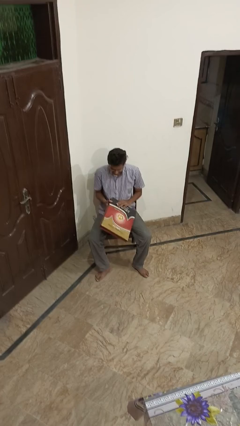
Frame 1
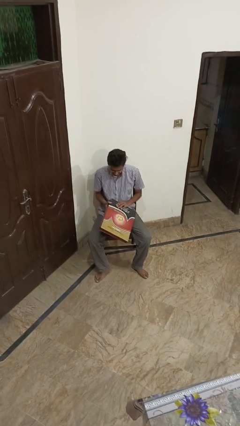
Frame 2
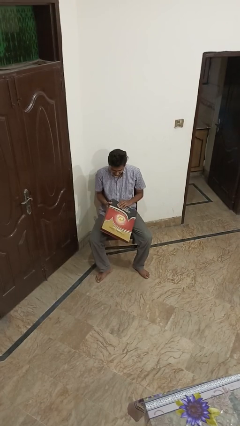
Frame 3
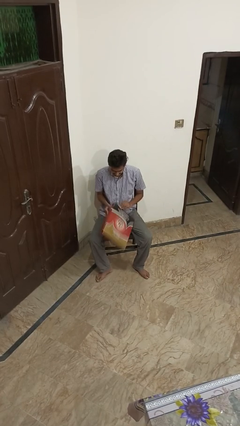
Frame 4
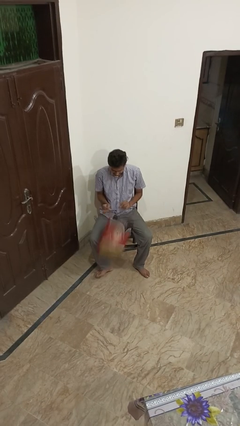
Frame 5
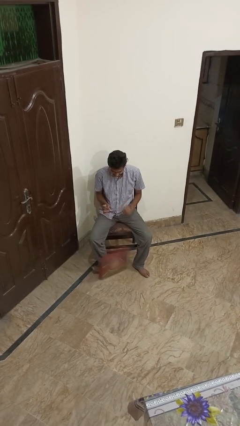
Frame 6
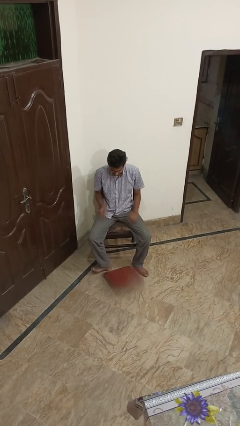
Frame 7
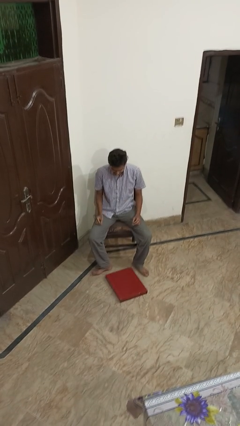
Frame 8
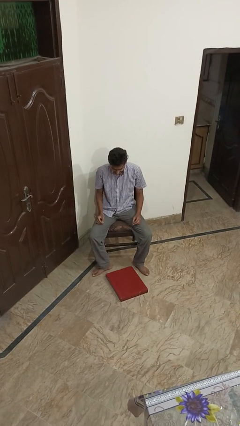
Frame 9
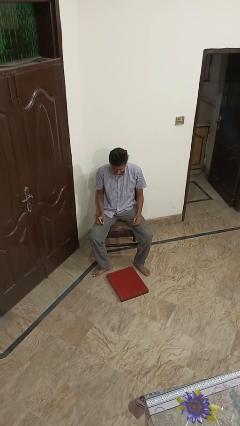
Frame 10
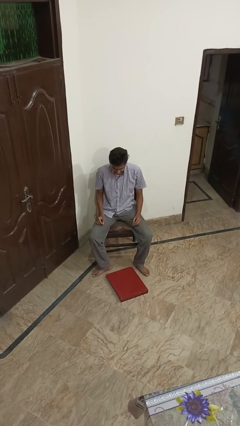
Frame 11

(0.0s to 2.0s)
person drops object

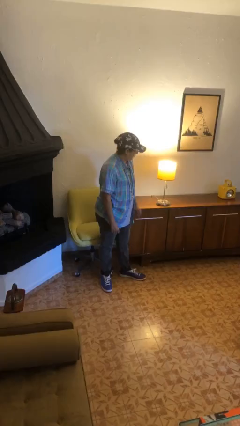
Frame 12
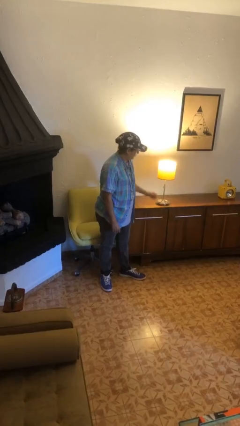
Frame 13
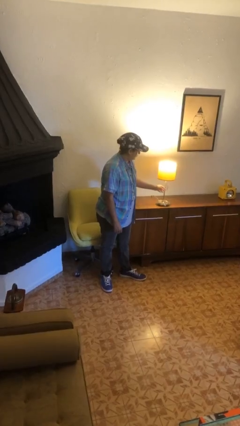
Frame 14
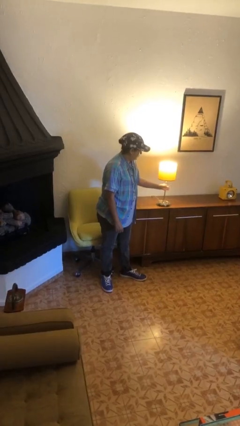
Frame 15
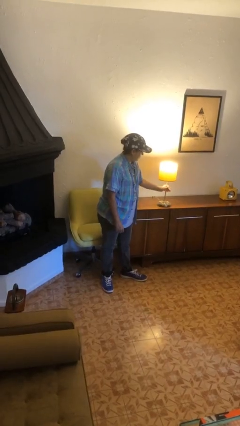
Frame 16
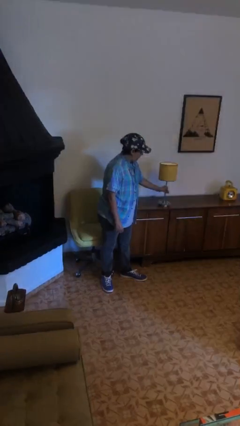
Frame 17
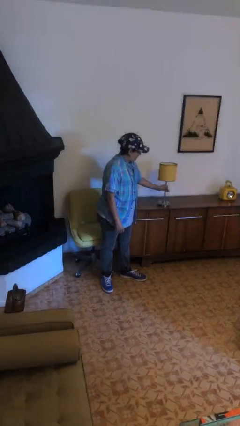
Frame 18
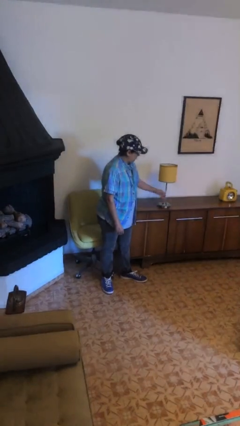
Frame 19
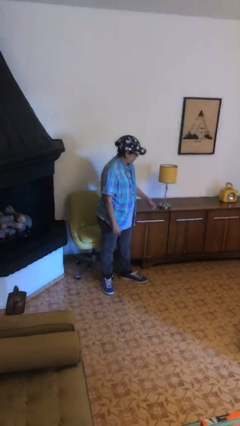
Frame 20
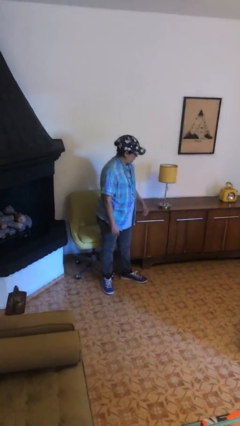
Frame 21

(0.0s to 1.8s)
person turns off lamp

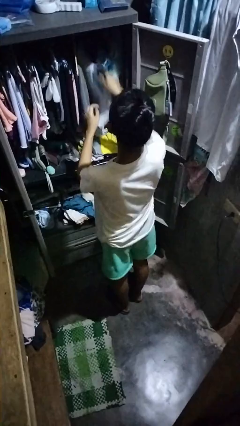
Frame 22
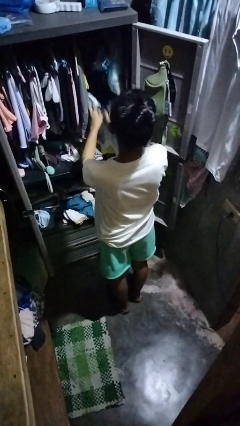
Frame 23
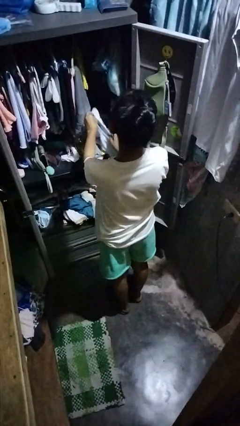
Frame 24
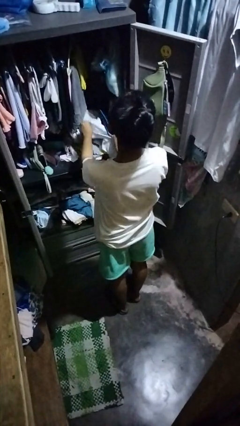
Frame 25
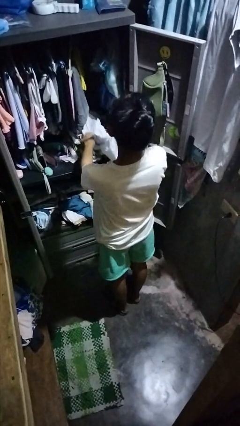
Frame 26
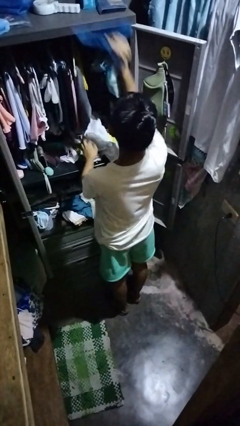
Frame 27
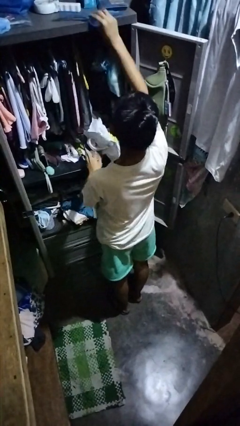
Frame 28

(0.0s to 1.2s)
person takes clothes from closet

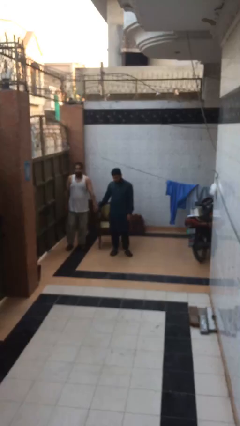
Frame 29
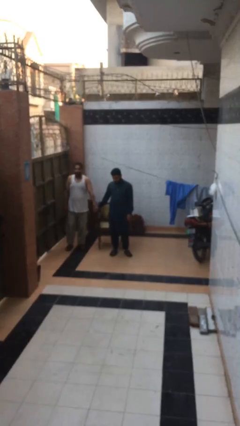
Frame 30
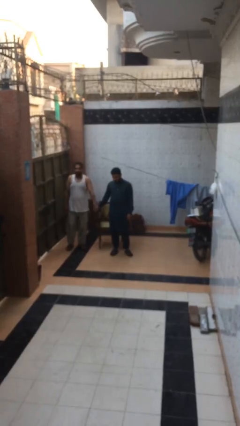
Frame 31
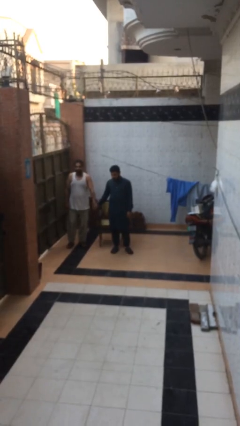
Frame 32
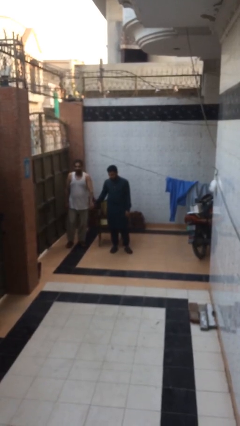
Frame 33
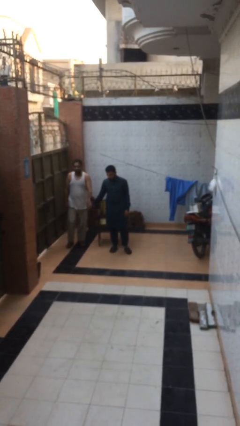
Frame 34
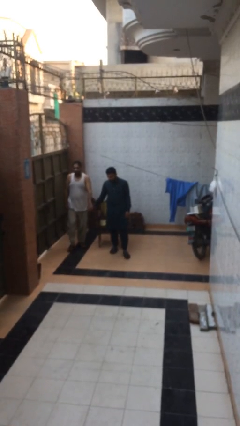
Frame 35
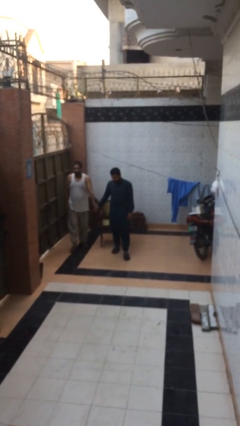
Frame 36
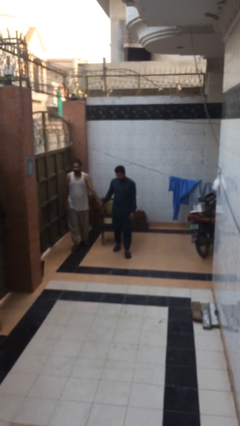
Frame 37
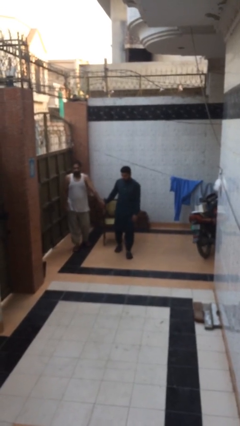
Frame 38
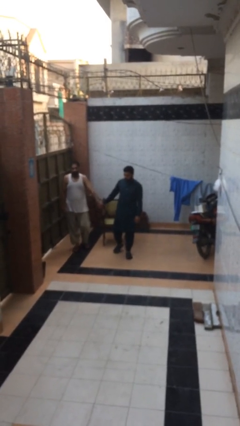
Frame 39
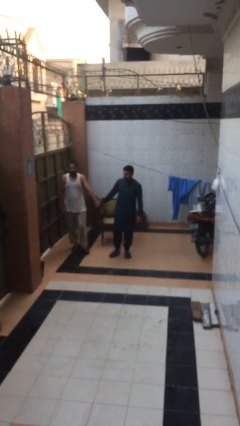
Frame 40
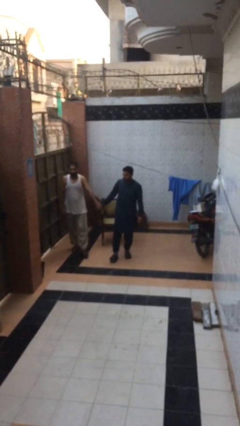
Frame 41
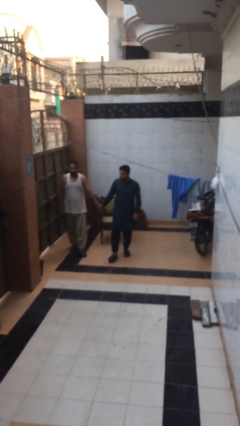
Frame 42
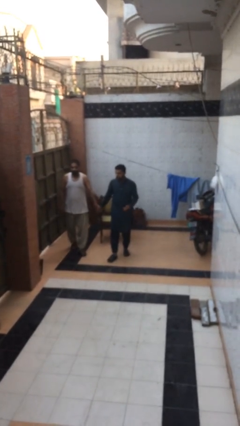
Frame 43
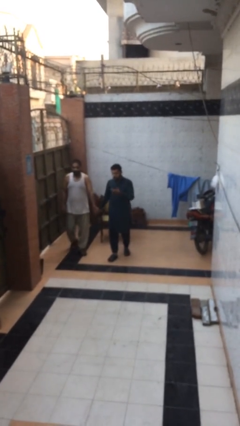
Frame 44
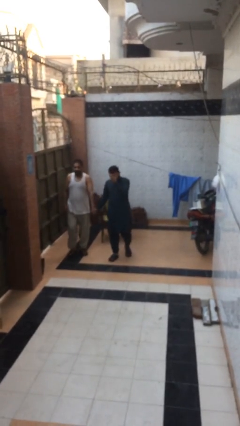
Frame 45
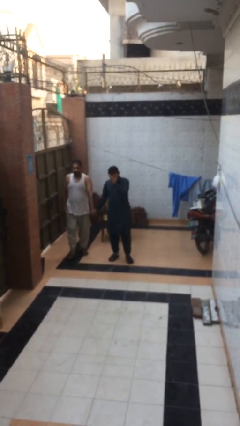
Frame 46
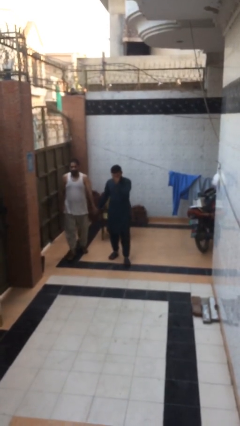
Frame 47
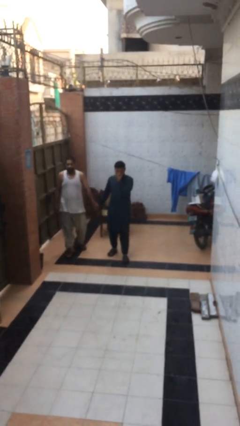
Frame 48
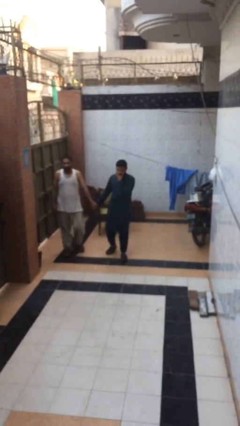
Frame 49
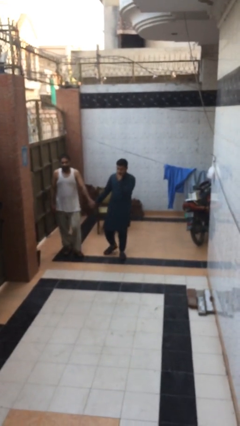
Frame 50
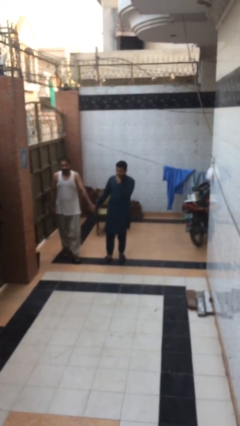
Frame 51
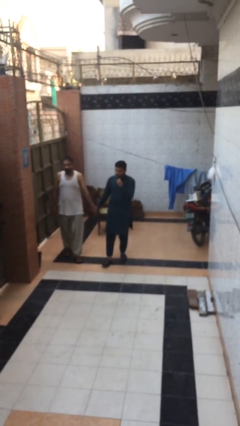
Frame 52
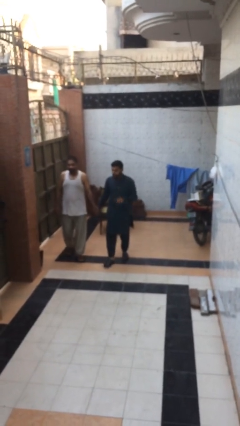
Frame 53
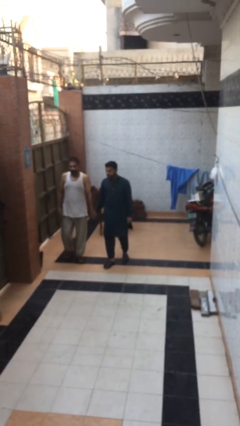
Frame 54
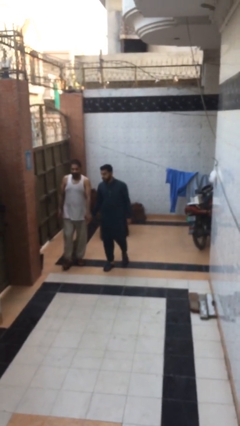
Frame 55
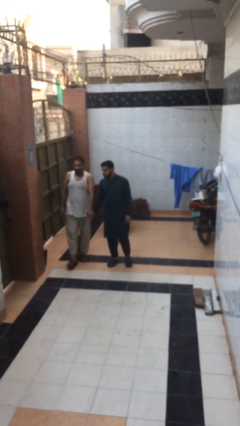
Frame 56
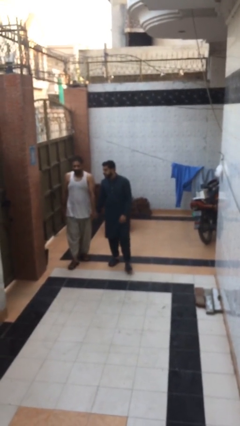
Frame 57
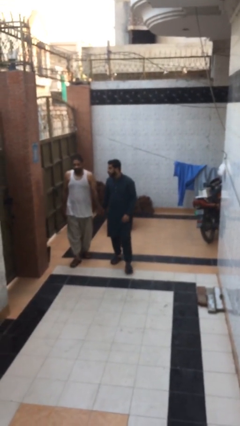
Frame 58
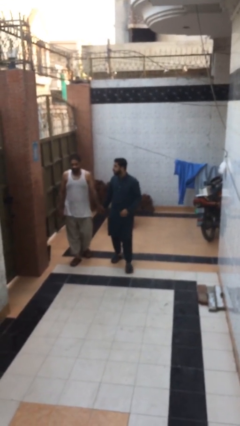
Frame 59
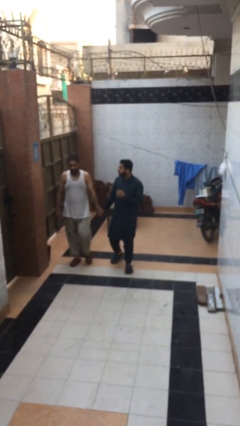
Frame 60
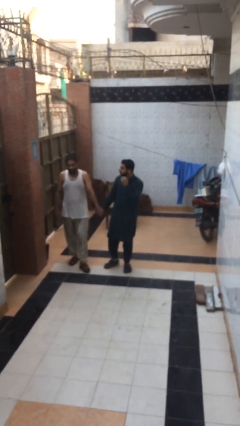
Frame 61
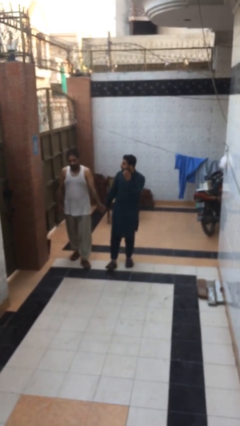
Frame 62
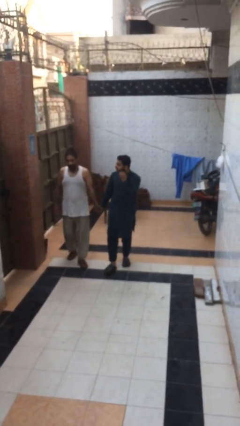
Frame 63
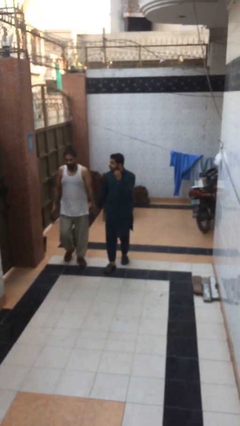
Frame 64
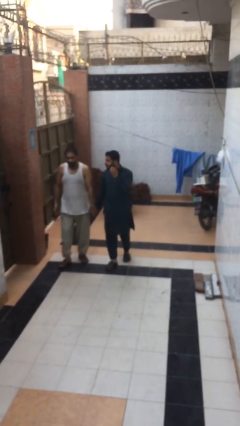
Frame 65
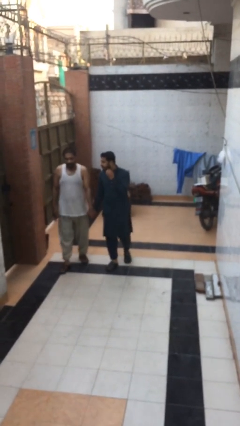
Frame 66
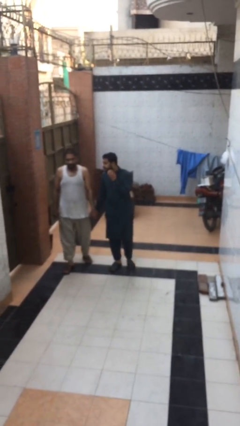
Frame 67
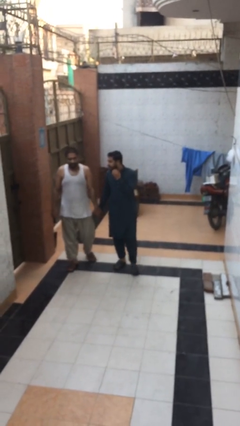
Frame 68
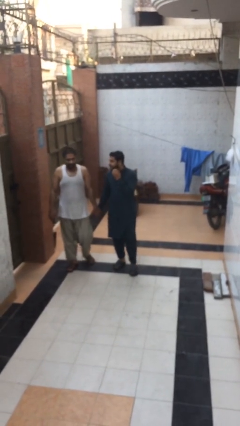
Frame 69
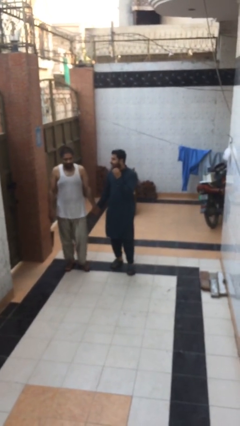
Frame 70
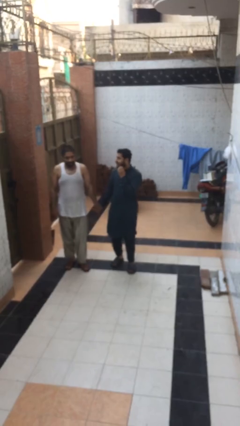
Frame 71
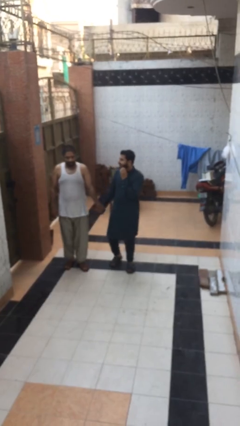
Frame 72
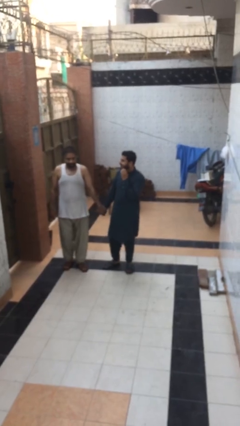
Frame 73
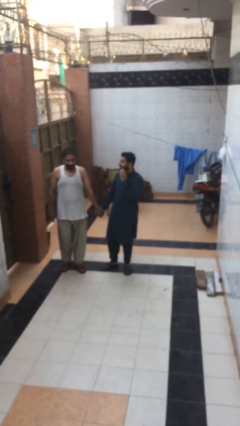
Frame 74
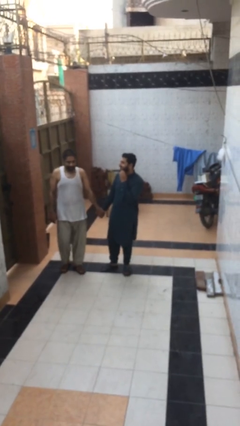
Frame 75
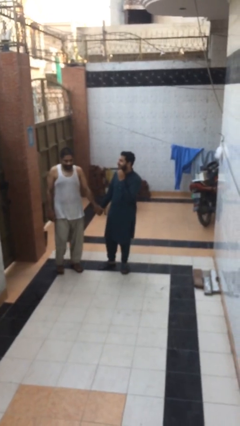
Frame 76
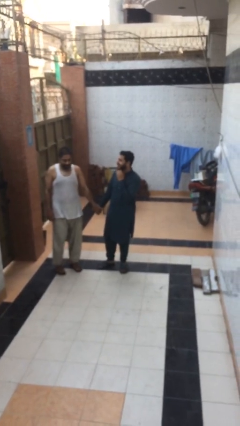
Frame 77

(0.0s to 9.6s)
person holds hand

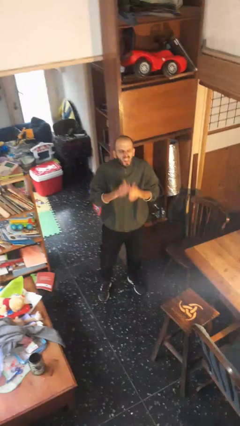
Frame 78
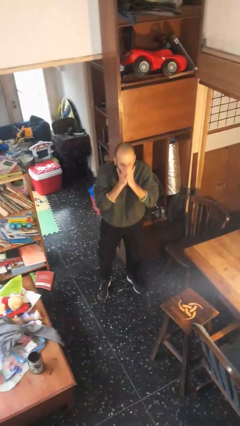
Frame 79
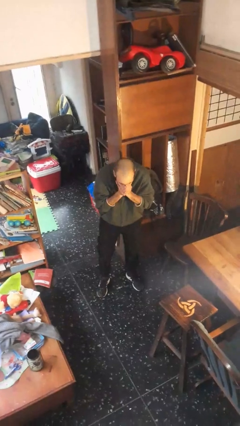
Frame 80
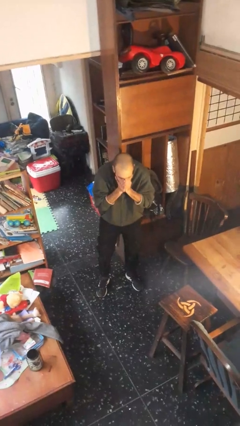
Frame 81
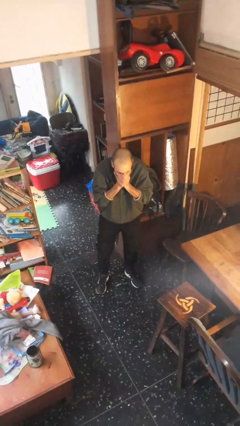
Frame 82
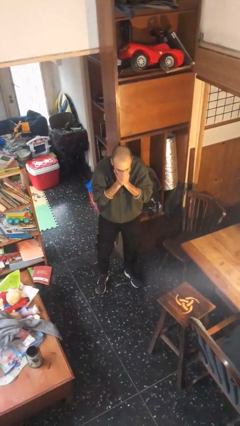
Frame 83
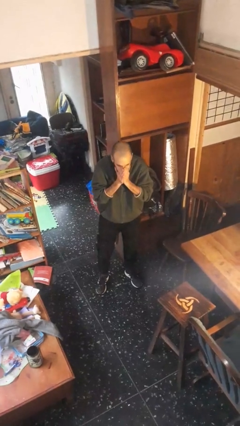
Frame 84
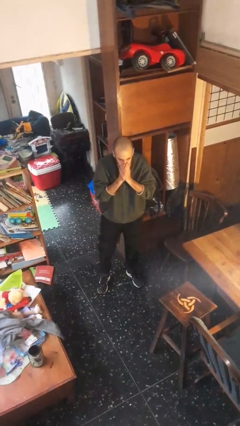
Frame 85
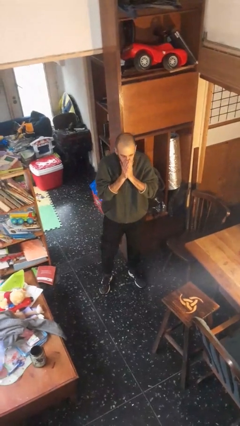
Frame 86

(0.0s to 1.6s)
person sneezes into hand

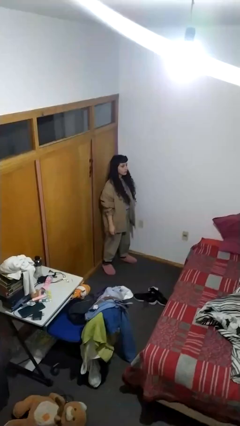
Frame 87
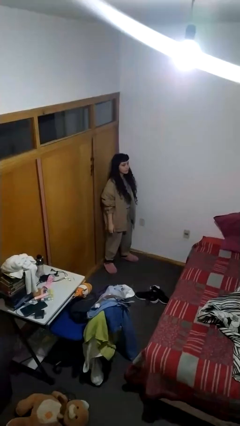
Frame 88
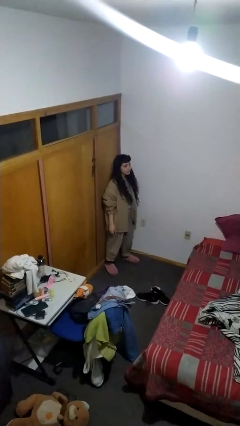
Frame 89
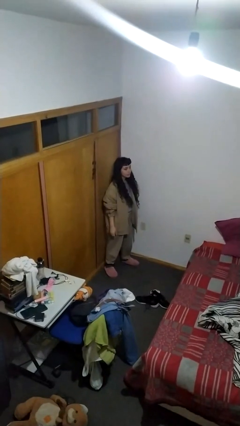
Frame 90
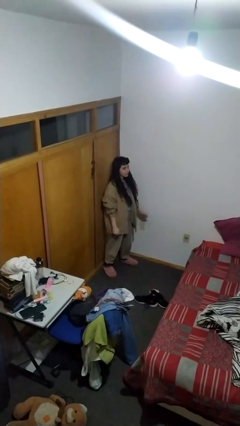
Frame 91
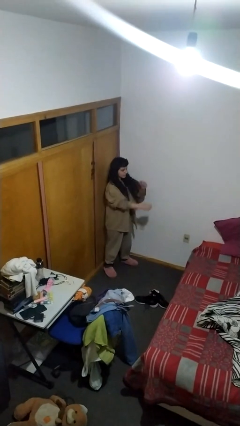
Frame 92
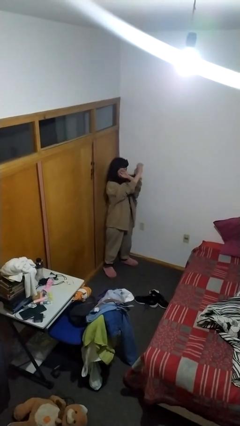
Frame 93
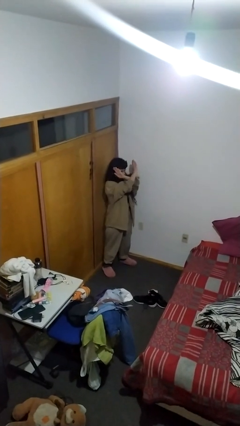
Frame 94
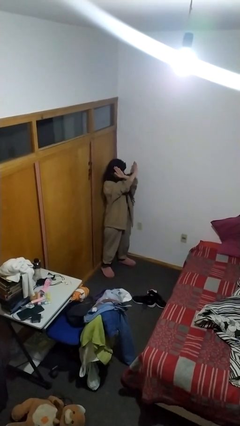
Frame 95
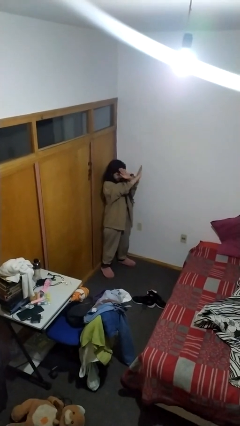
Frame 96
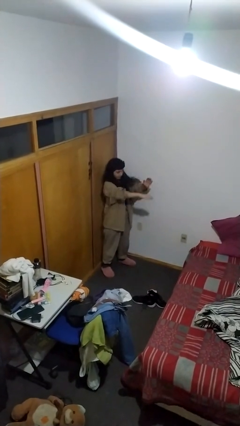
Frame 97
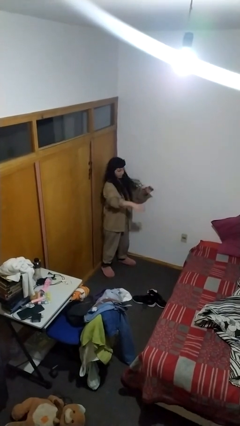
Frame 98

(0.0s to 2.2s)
person gestures arms x
